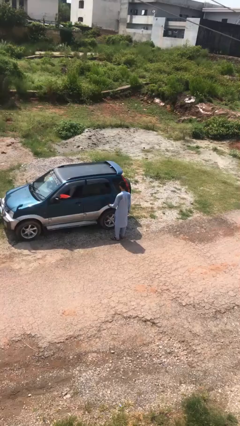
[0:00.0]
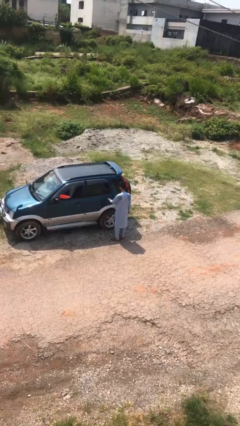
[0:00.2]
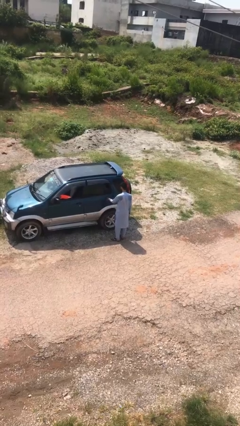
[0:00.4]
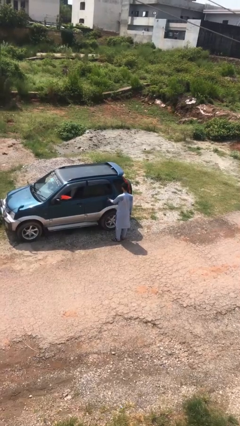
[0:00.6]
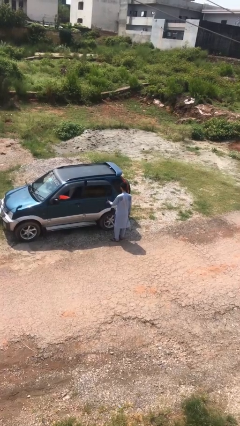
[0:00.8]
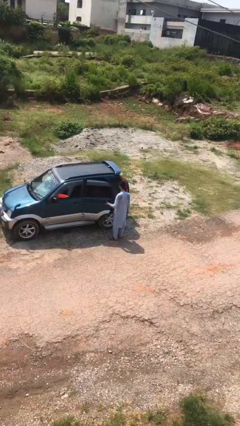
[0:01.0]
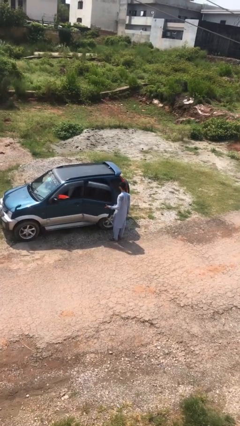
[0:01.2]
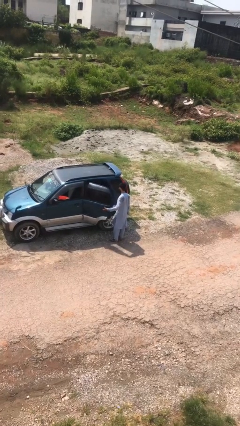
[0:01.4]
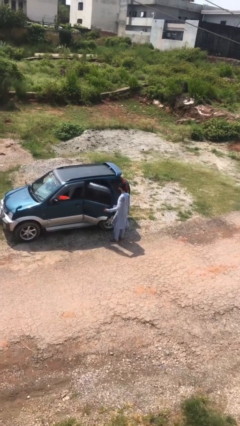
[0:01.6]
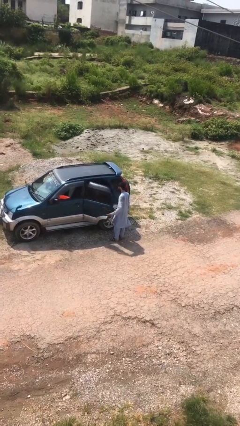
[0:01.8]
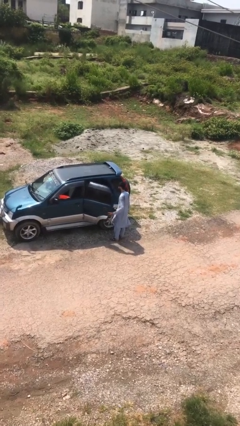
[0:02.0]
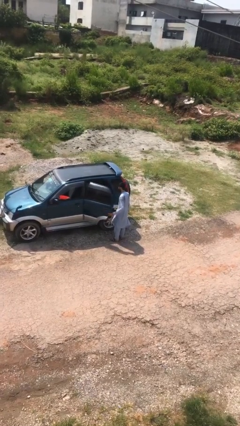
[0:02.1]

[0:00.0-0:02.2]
person opens car door

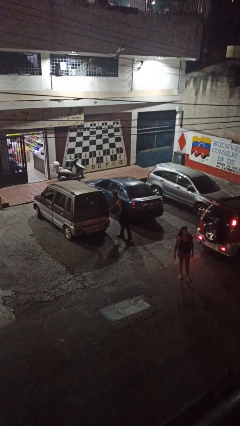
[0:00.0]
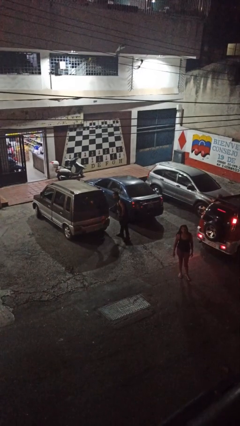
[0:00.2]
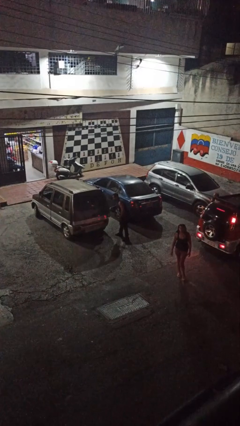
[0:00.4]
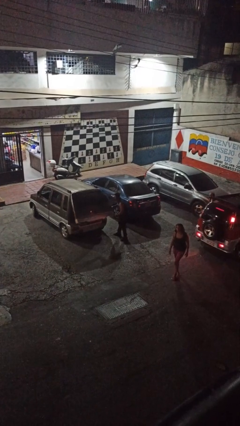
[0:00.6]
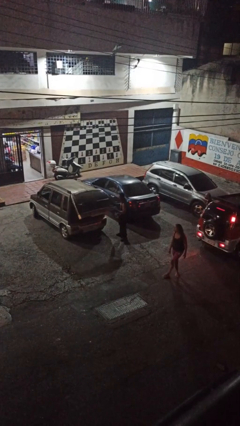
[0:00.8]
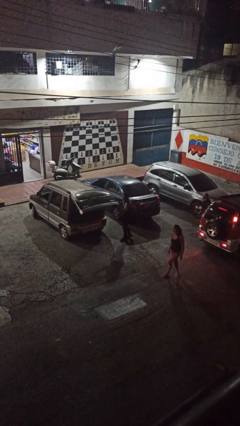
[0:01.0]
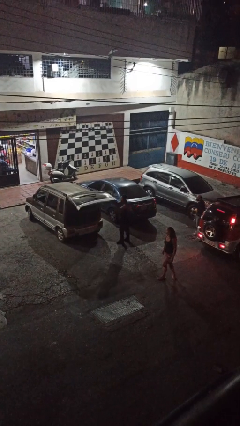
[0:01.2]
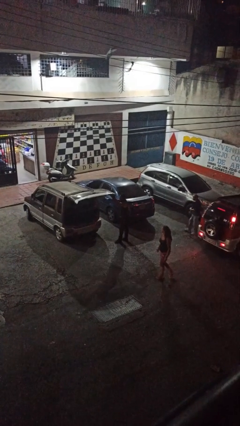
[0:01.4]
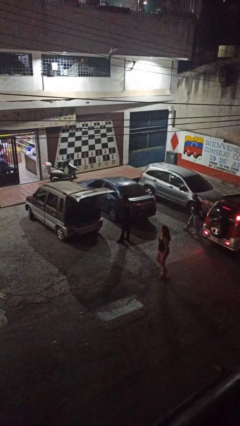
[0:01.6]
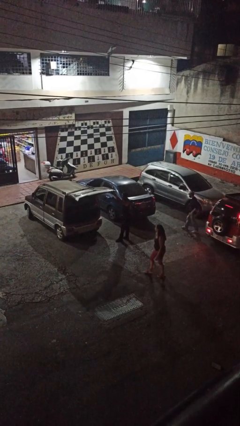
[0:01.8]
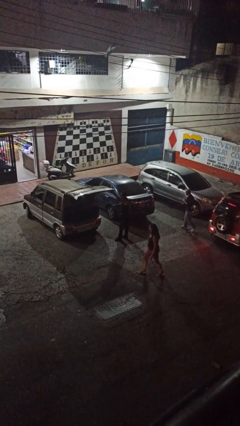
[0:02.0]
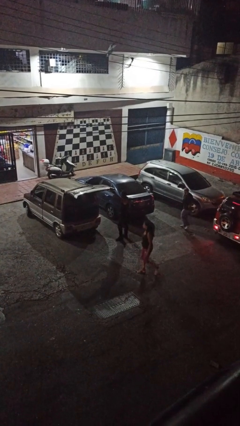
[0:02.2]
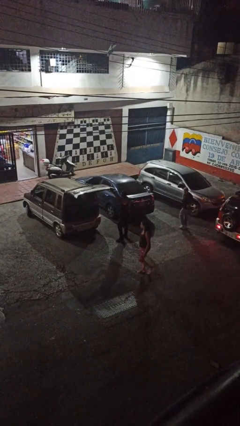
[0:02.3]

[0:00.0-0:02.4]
person opens car trunk

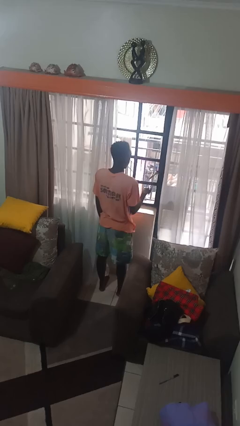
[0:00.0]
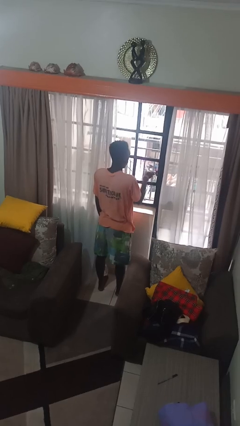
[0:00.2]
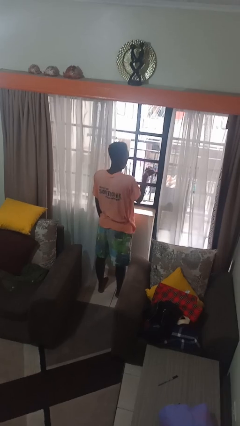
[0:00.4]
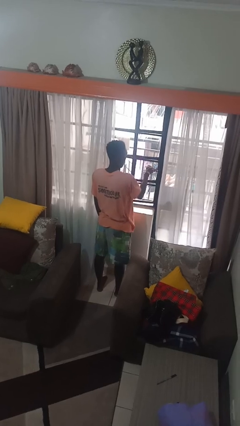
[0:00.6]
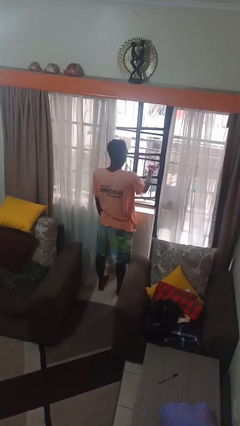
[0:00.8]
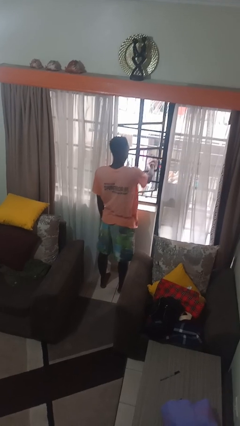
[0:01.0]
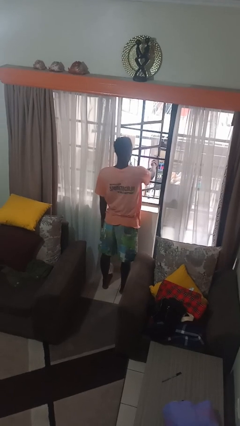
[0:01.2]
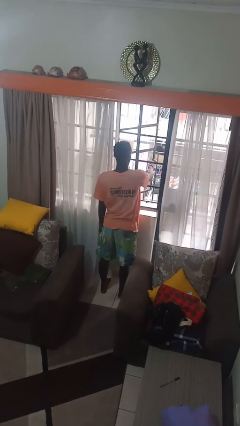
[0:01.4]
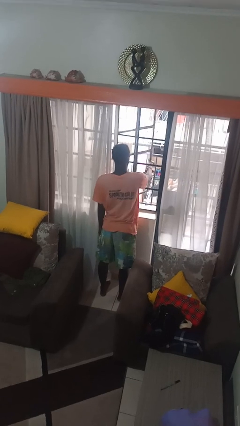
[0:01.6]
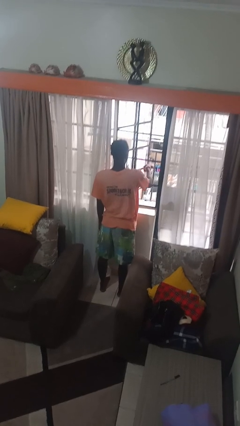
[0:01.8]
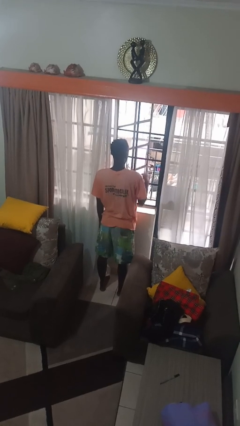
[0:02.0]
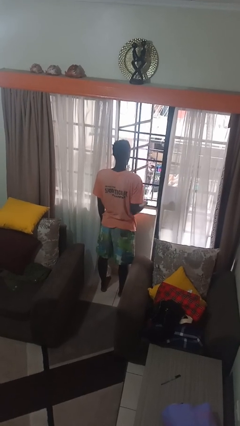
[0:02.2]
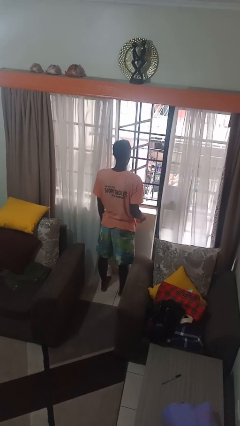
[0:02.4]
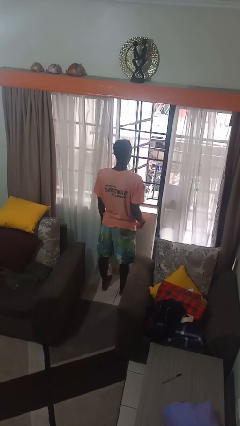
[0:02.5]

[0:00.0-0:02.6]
person opens home window

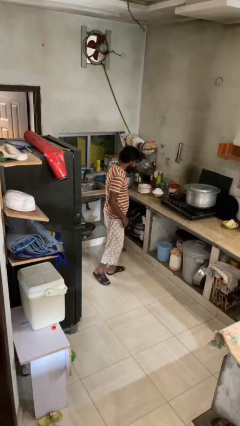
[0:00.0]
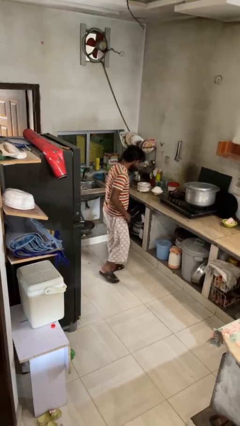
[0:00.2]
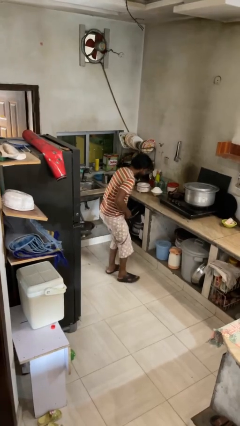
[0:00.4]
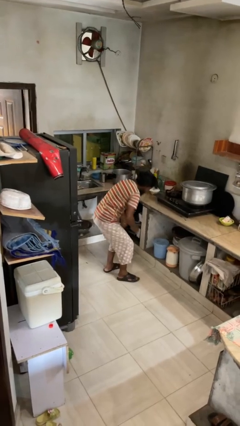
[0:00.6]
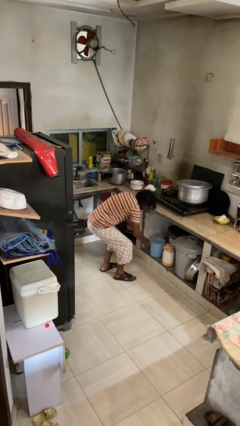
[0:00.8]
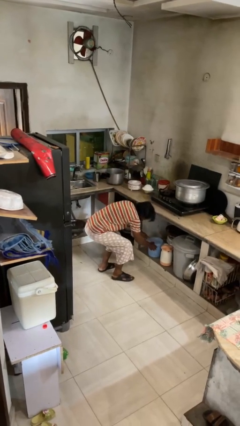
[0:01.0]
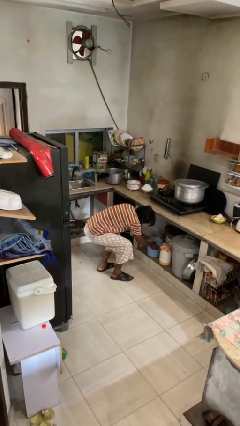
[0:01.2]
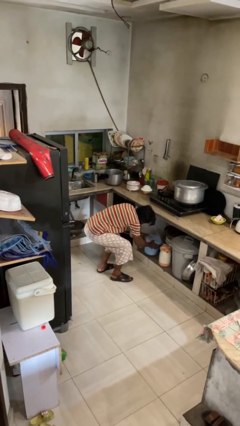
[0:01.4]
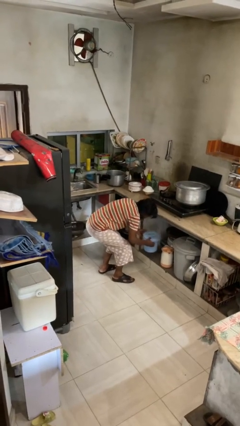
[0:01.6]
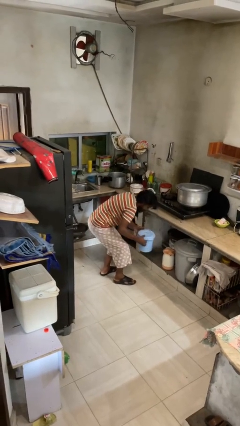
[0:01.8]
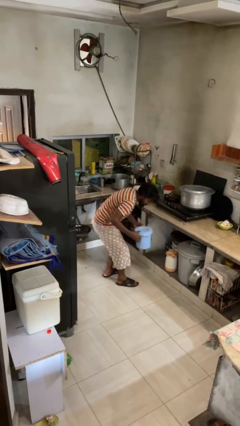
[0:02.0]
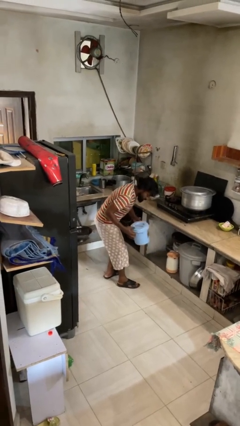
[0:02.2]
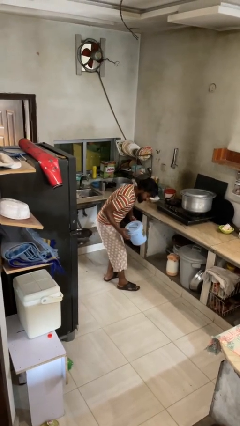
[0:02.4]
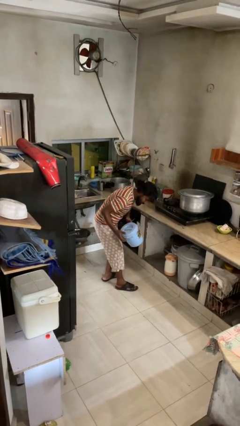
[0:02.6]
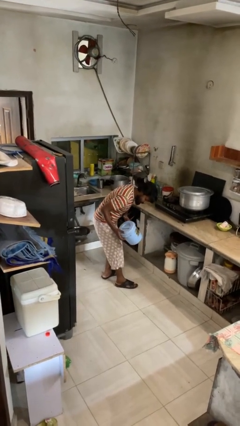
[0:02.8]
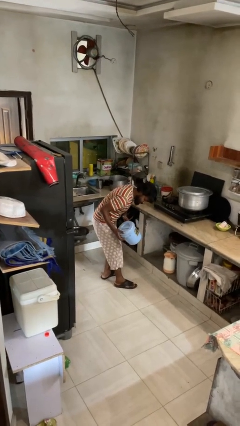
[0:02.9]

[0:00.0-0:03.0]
person picks up object from cabinet

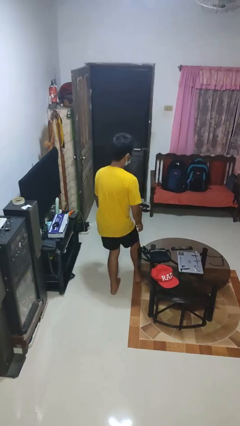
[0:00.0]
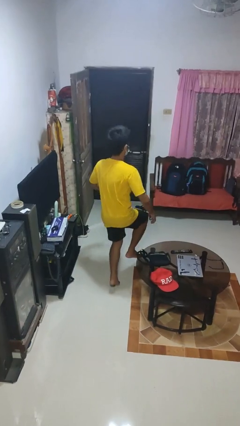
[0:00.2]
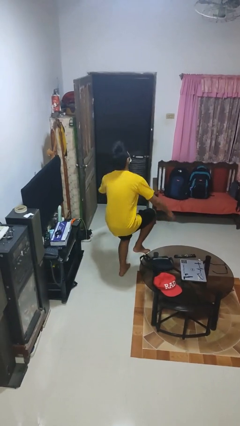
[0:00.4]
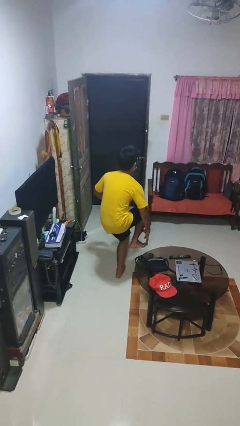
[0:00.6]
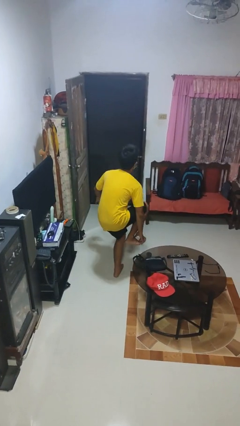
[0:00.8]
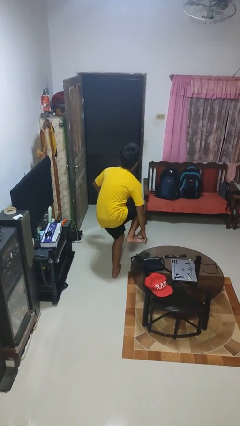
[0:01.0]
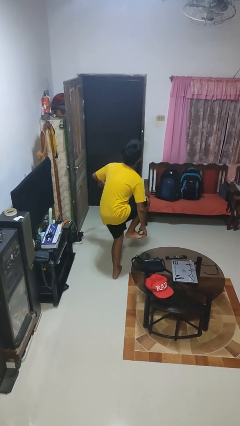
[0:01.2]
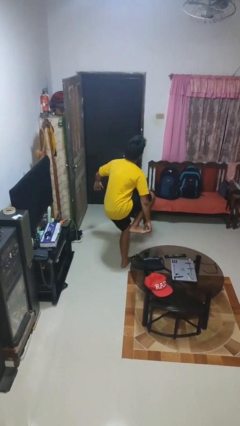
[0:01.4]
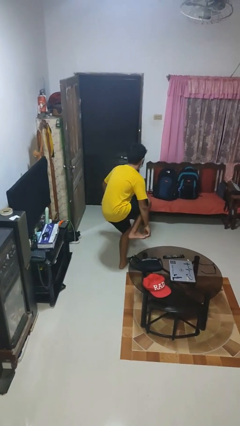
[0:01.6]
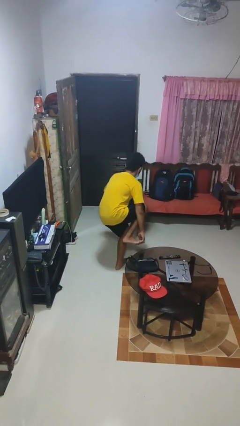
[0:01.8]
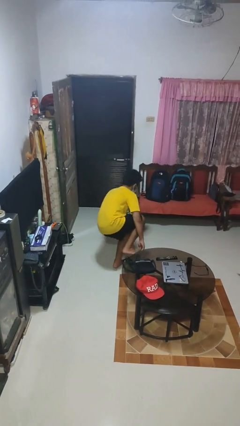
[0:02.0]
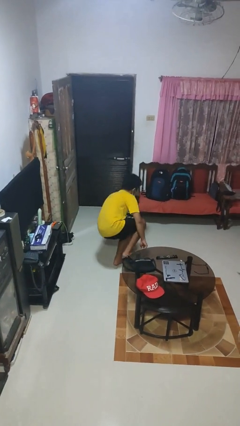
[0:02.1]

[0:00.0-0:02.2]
person trips on object on floor

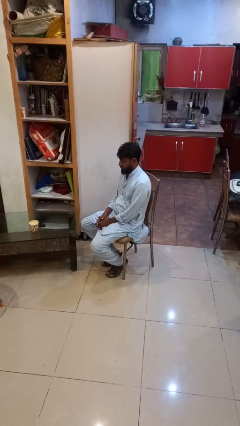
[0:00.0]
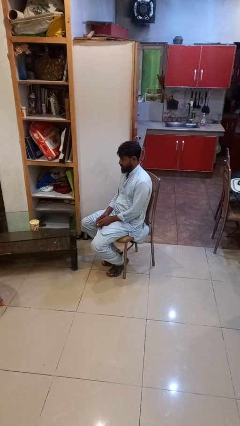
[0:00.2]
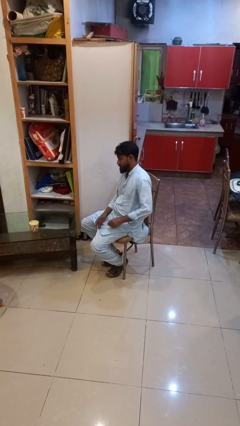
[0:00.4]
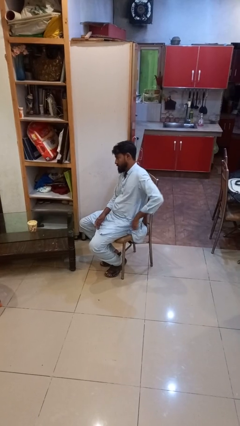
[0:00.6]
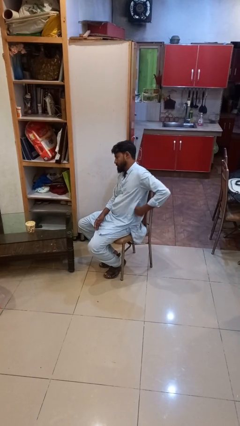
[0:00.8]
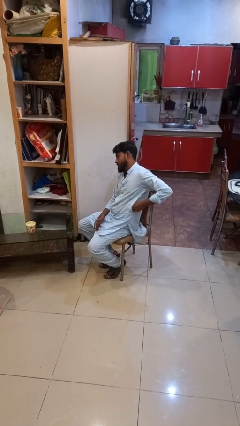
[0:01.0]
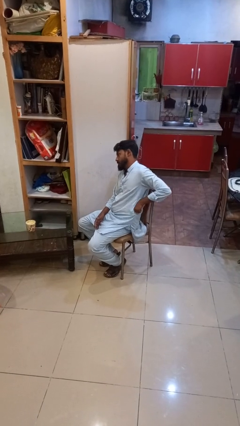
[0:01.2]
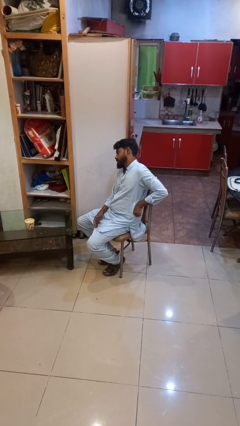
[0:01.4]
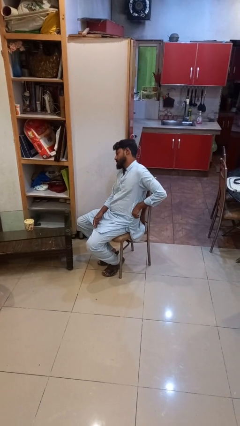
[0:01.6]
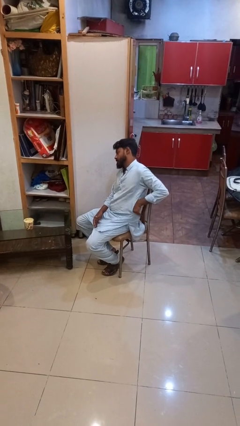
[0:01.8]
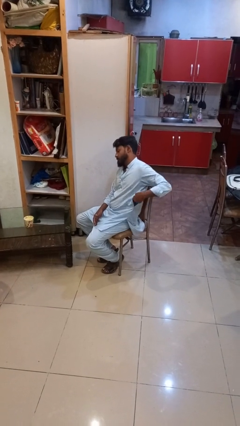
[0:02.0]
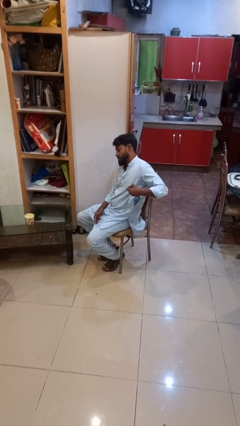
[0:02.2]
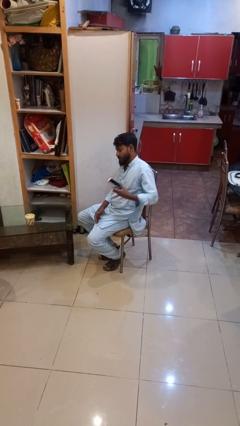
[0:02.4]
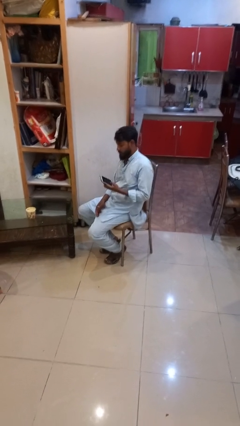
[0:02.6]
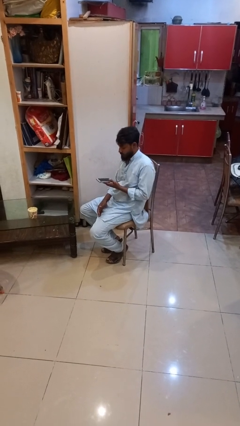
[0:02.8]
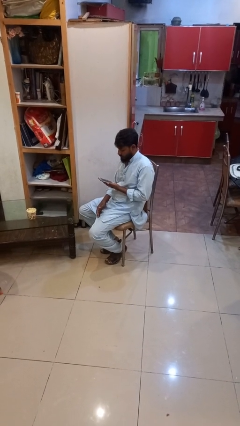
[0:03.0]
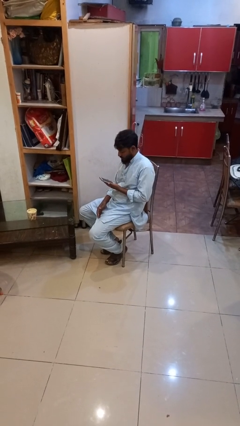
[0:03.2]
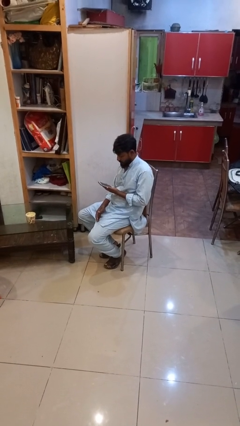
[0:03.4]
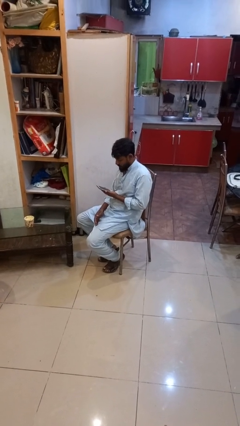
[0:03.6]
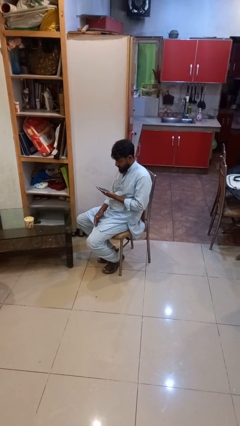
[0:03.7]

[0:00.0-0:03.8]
person takes phone from pocket

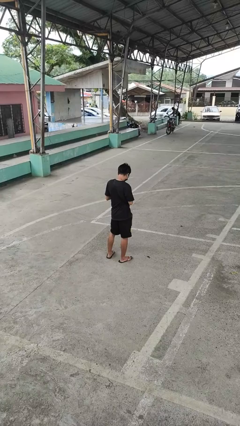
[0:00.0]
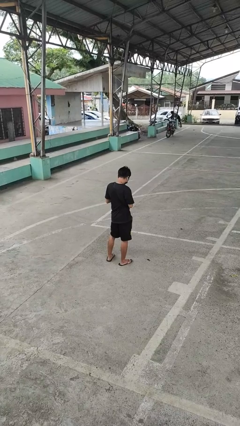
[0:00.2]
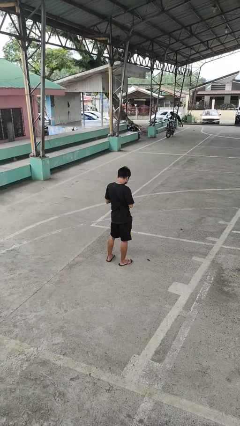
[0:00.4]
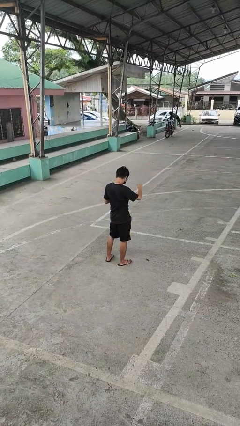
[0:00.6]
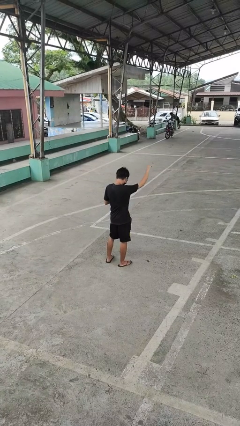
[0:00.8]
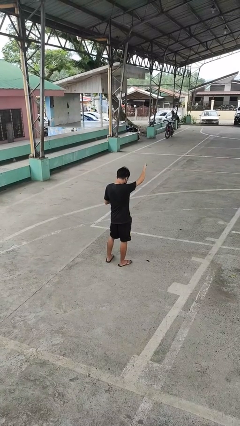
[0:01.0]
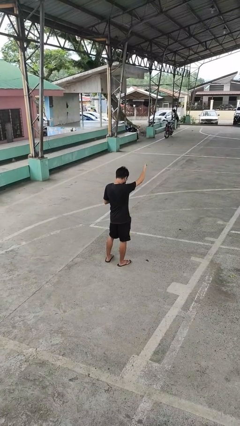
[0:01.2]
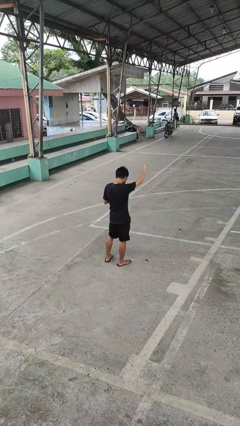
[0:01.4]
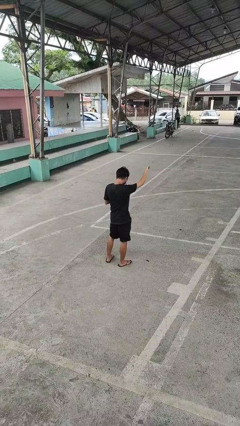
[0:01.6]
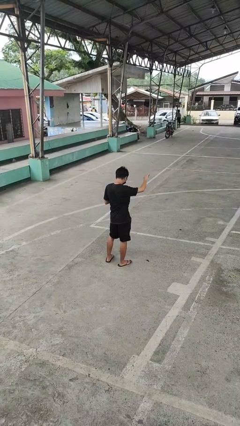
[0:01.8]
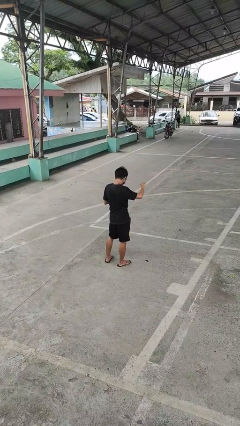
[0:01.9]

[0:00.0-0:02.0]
person gestures thumbs down
